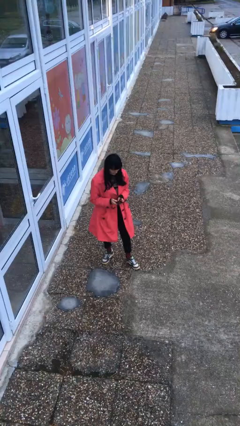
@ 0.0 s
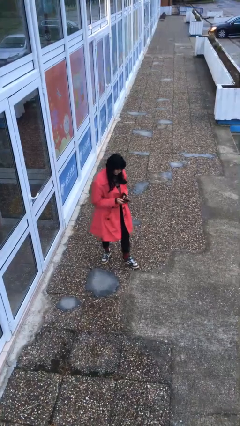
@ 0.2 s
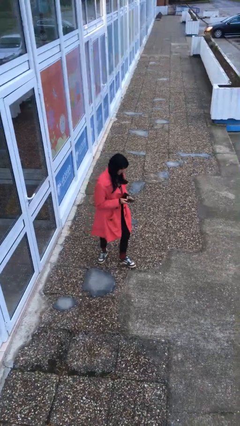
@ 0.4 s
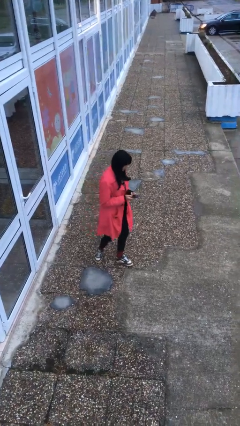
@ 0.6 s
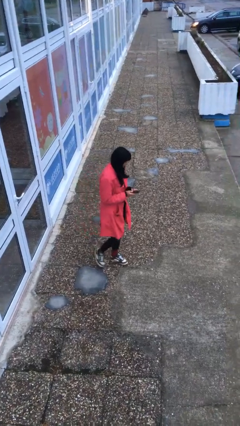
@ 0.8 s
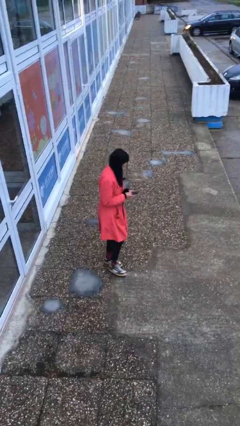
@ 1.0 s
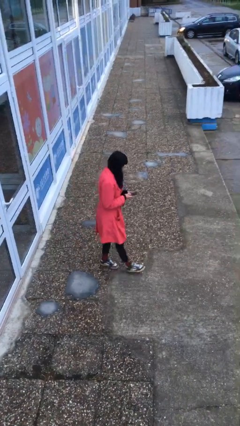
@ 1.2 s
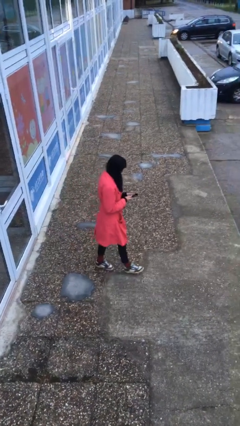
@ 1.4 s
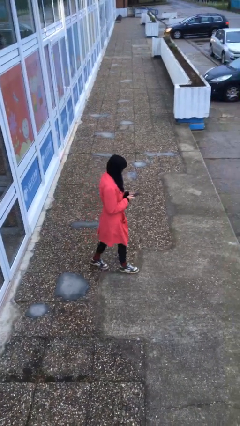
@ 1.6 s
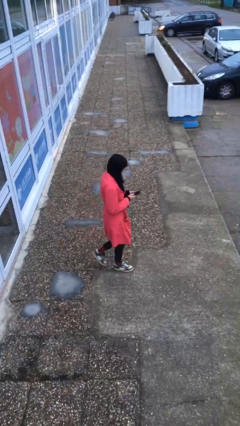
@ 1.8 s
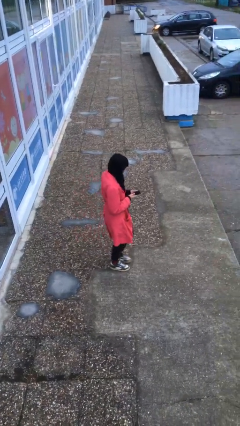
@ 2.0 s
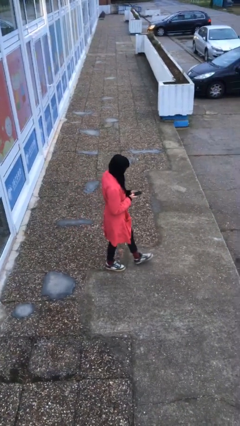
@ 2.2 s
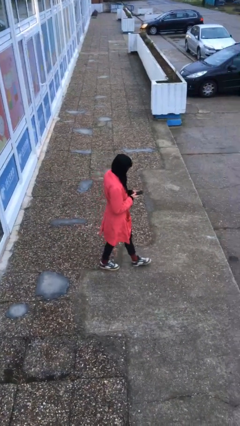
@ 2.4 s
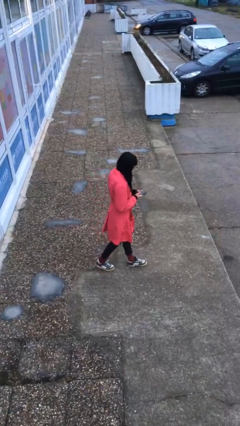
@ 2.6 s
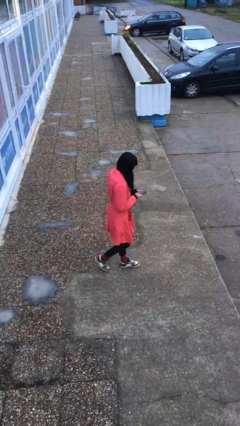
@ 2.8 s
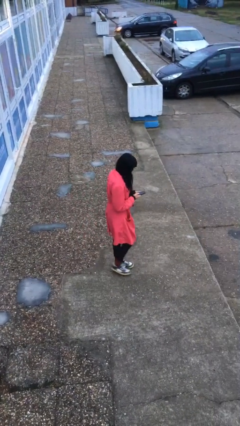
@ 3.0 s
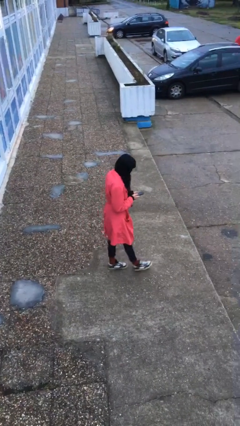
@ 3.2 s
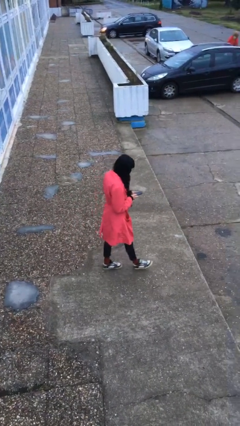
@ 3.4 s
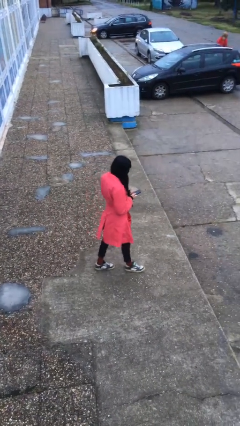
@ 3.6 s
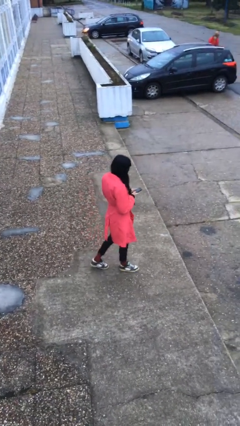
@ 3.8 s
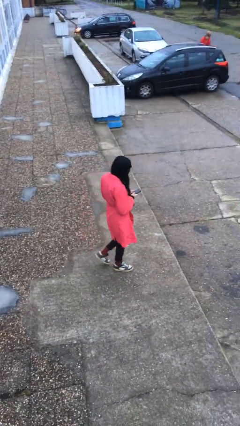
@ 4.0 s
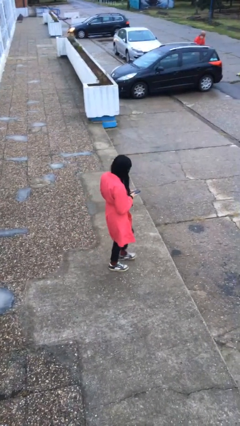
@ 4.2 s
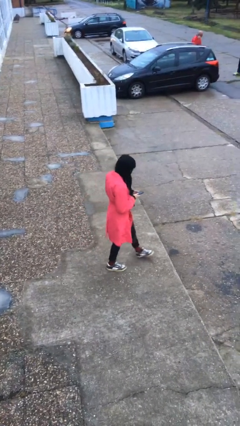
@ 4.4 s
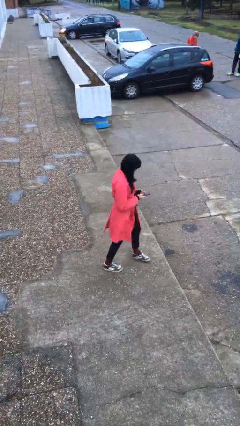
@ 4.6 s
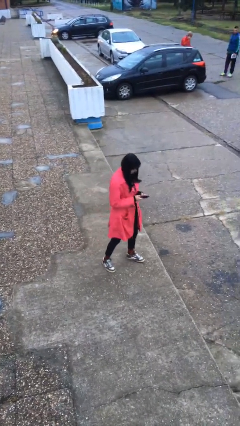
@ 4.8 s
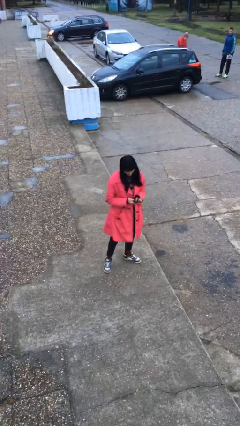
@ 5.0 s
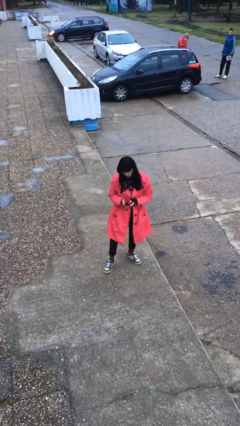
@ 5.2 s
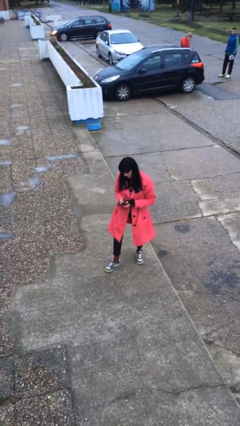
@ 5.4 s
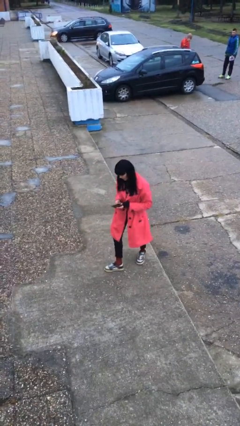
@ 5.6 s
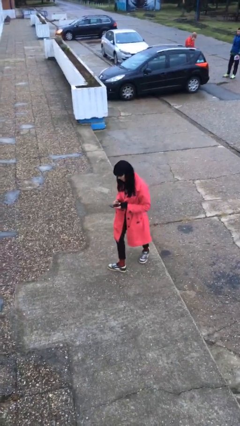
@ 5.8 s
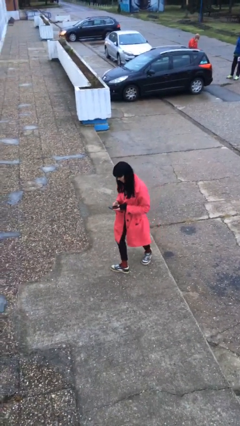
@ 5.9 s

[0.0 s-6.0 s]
person texts on phone

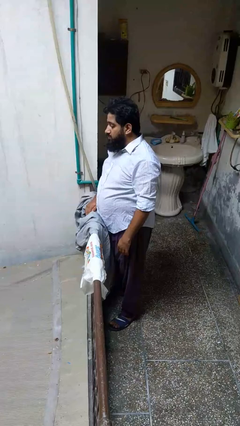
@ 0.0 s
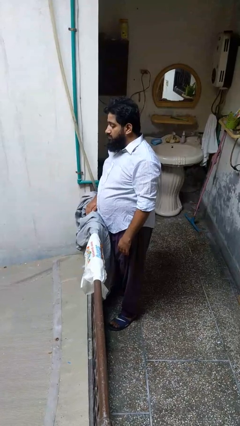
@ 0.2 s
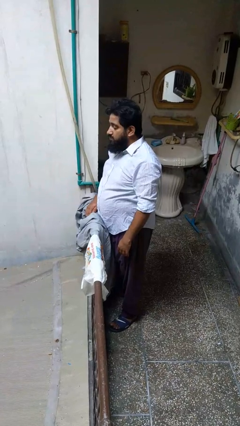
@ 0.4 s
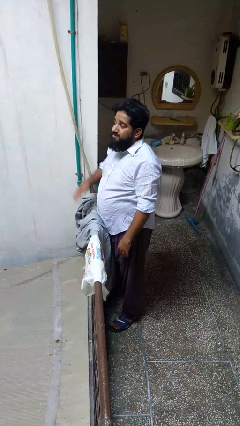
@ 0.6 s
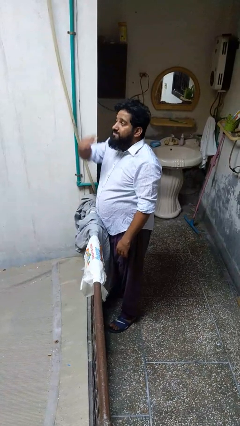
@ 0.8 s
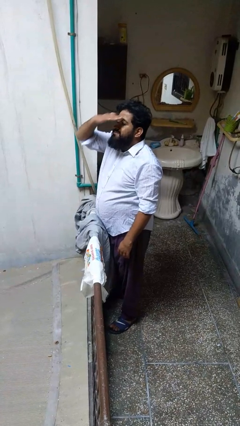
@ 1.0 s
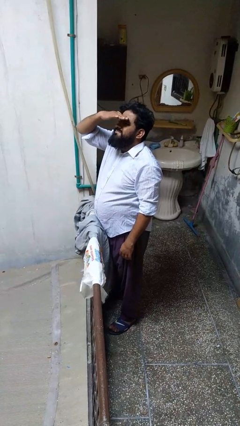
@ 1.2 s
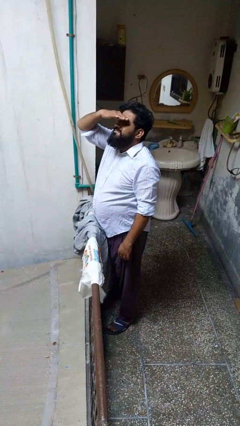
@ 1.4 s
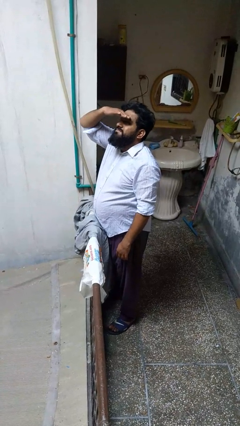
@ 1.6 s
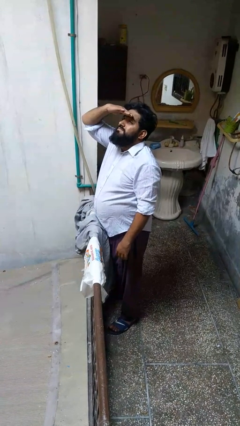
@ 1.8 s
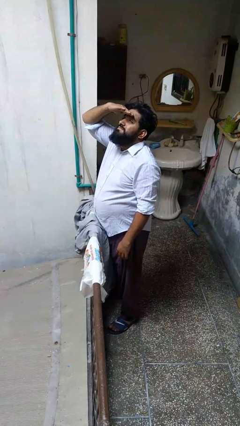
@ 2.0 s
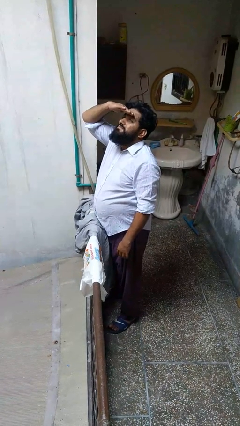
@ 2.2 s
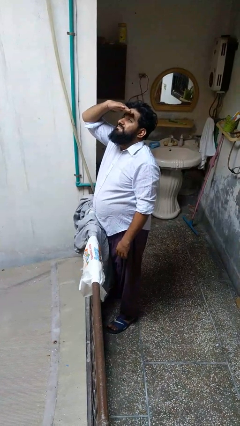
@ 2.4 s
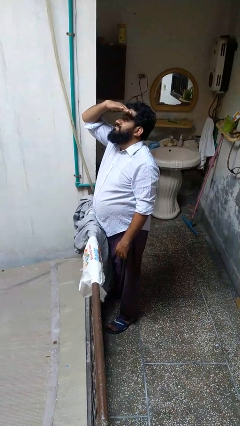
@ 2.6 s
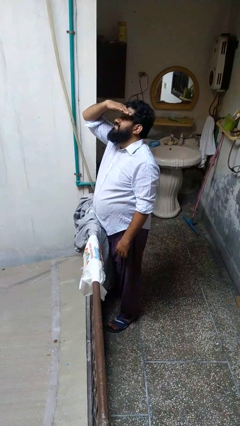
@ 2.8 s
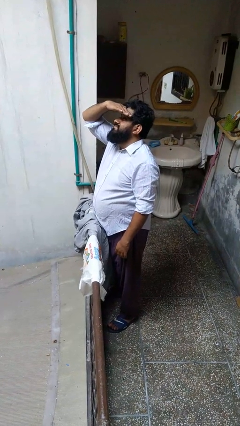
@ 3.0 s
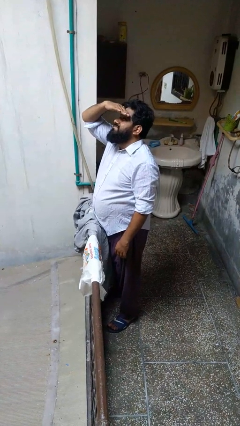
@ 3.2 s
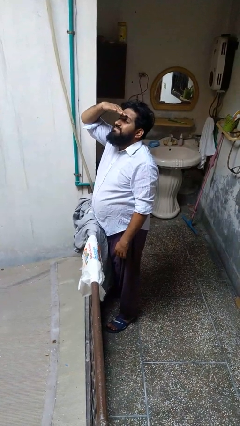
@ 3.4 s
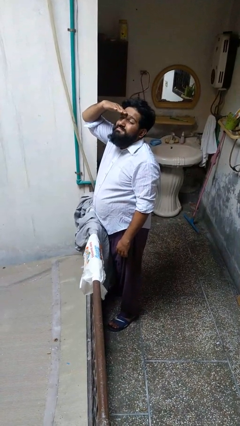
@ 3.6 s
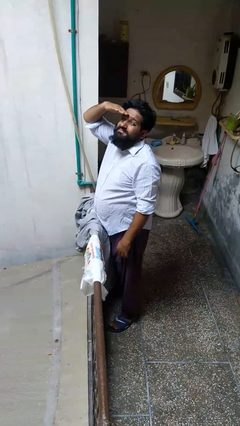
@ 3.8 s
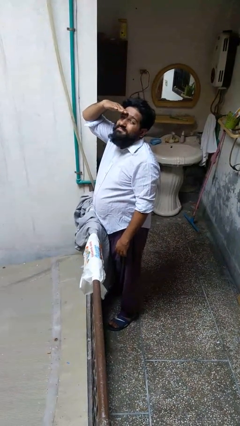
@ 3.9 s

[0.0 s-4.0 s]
person shades eyes

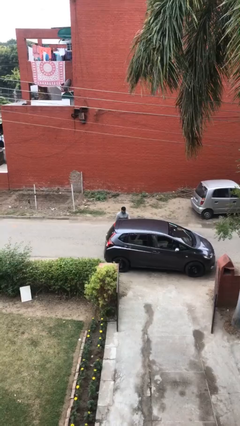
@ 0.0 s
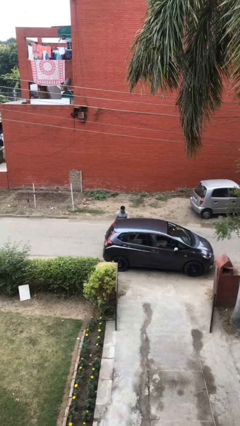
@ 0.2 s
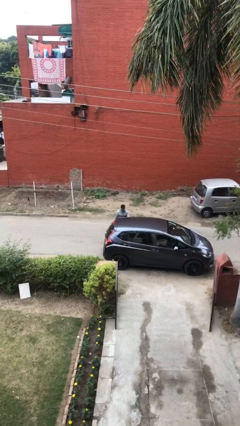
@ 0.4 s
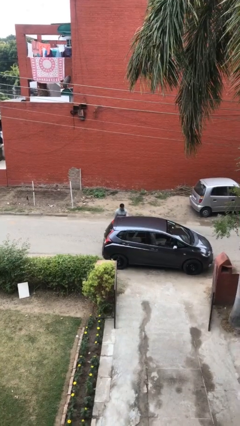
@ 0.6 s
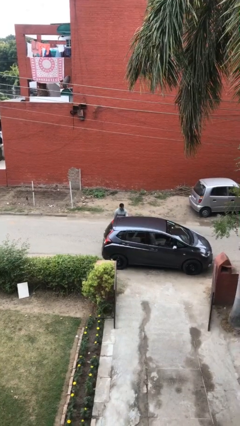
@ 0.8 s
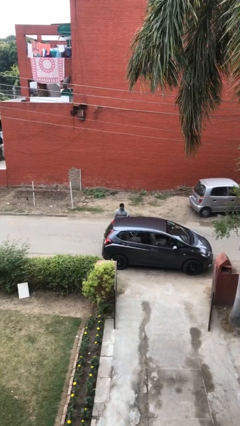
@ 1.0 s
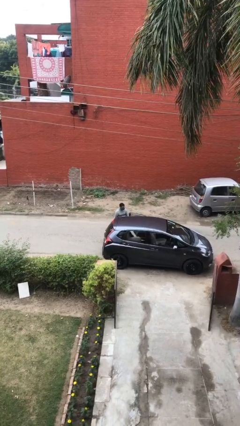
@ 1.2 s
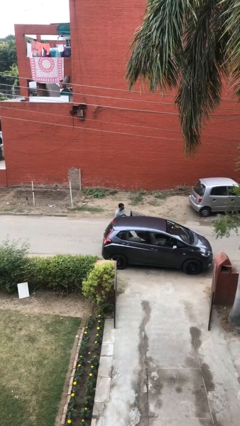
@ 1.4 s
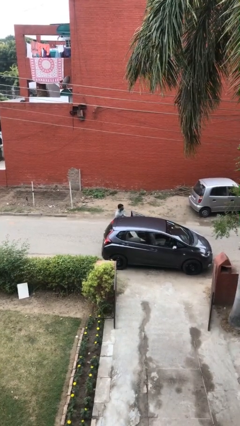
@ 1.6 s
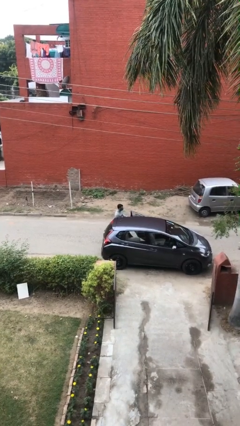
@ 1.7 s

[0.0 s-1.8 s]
person opens car door

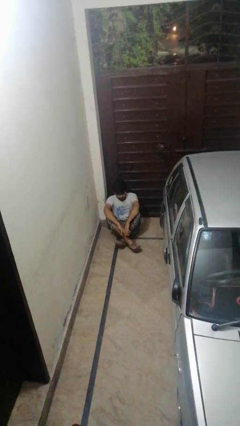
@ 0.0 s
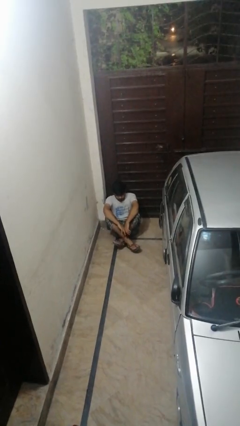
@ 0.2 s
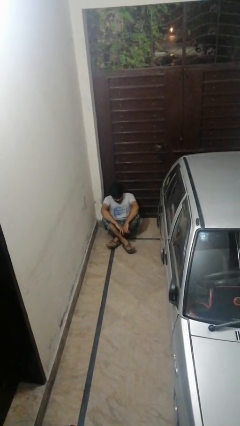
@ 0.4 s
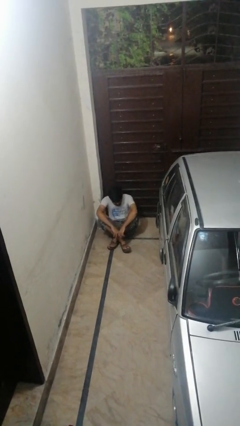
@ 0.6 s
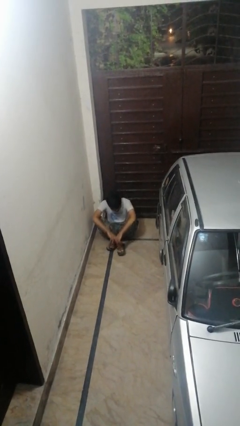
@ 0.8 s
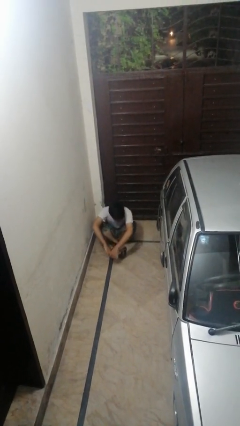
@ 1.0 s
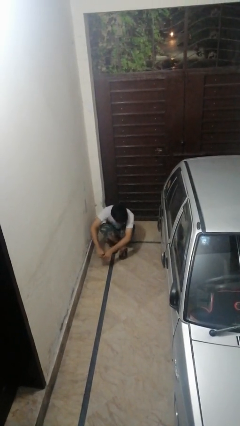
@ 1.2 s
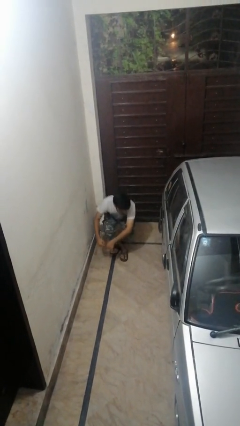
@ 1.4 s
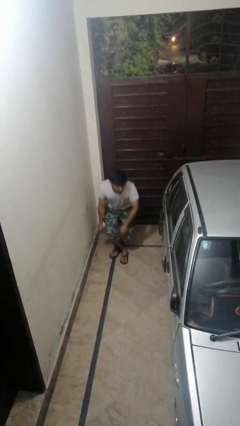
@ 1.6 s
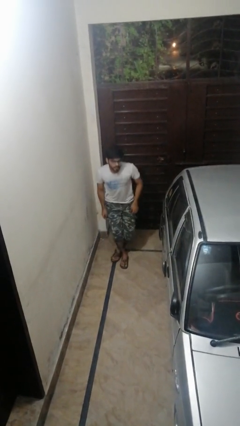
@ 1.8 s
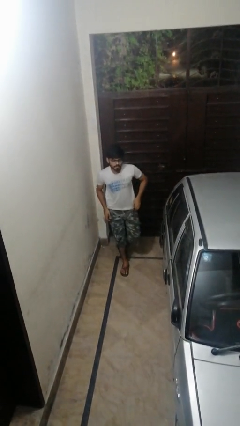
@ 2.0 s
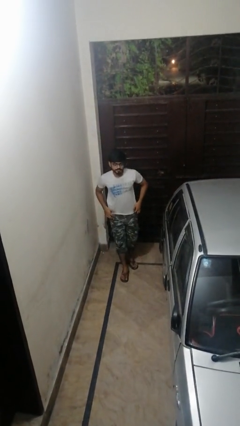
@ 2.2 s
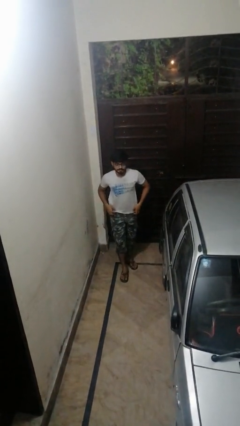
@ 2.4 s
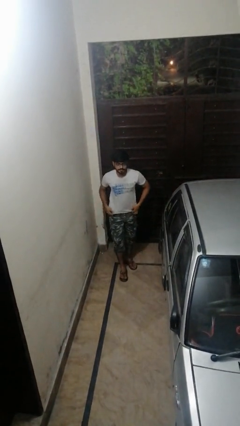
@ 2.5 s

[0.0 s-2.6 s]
person stands up from floor

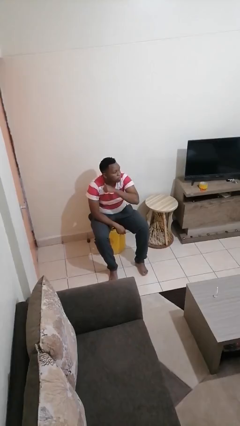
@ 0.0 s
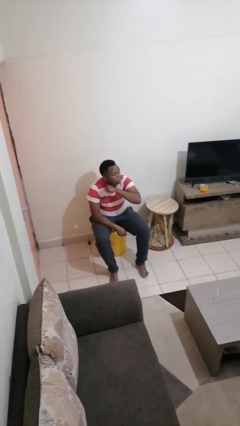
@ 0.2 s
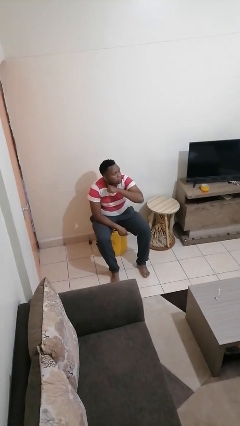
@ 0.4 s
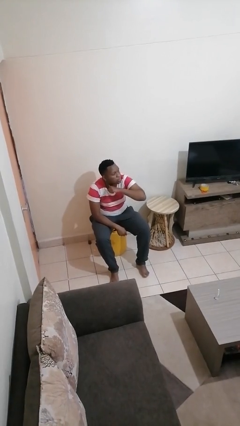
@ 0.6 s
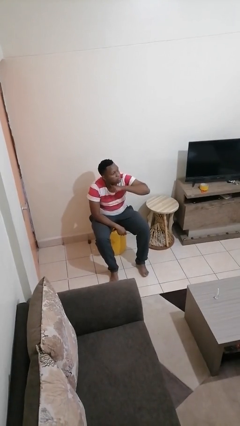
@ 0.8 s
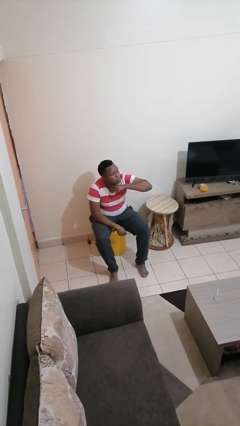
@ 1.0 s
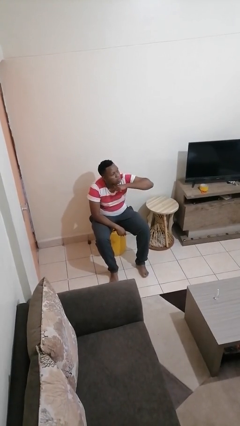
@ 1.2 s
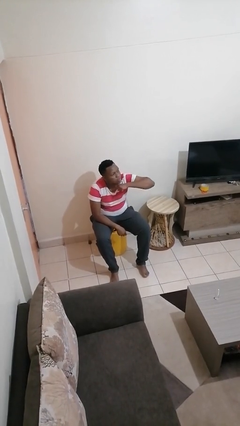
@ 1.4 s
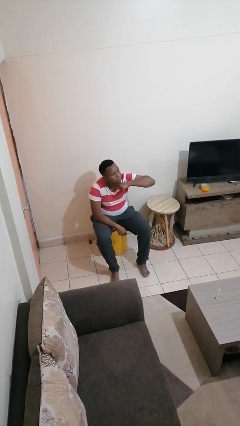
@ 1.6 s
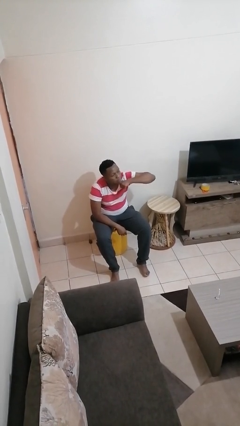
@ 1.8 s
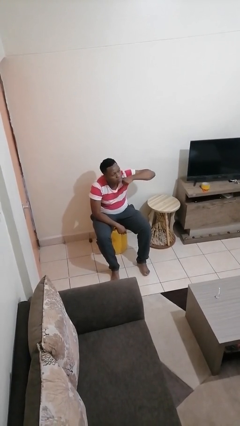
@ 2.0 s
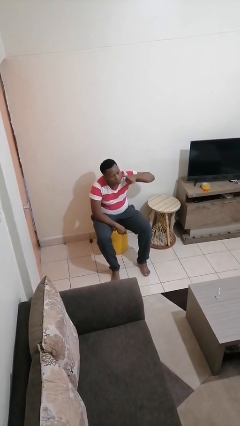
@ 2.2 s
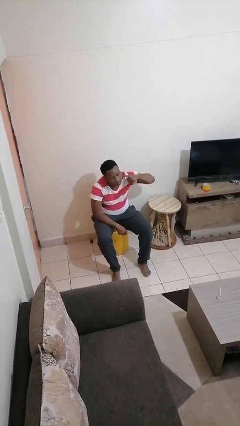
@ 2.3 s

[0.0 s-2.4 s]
person gestures cut

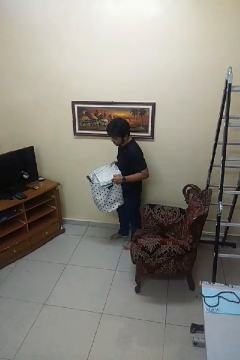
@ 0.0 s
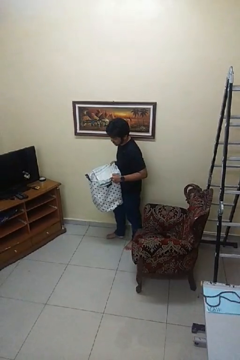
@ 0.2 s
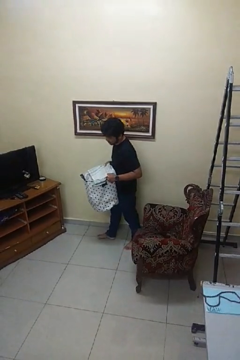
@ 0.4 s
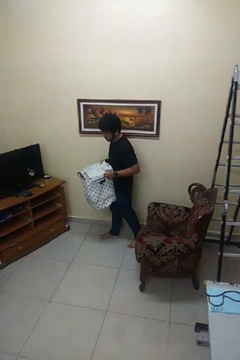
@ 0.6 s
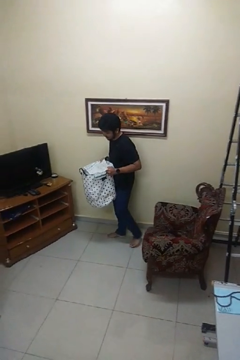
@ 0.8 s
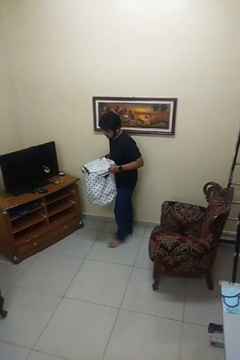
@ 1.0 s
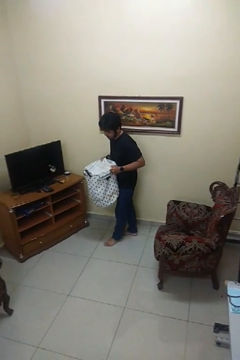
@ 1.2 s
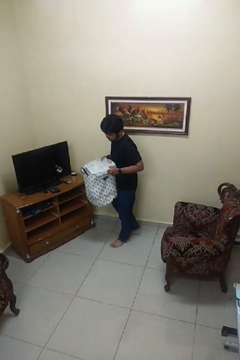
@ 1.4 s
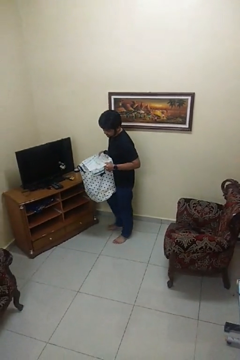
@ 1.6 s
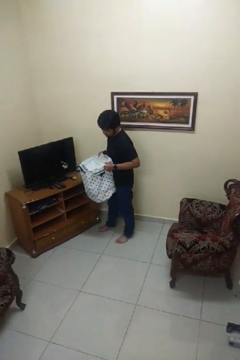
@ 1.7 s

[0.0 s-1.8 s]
person carries laundry basket
